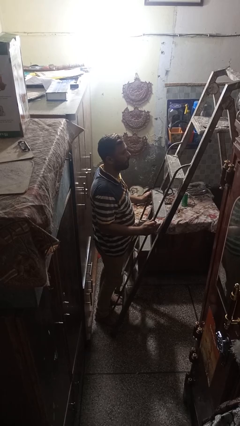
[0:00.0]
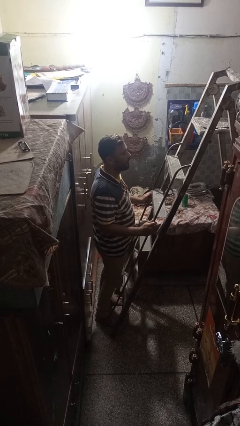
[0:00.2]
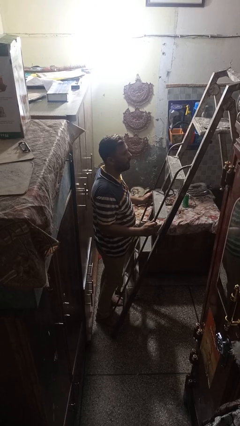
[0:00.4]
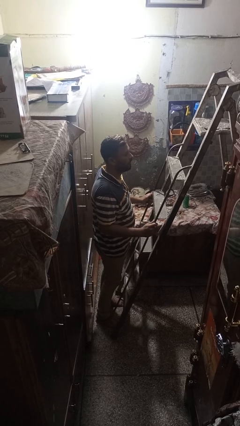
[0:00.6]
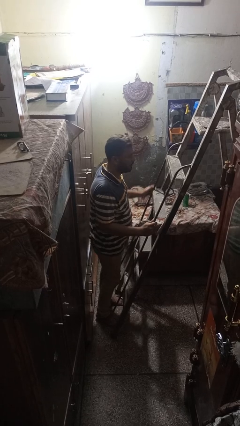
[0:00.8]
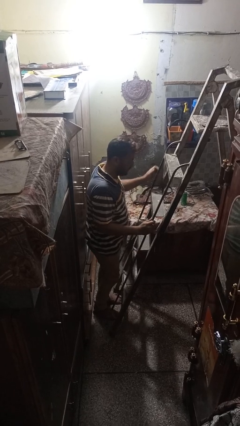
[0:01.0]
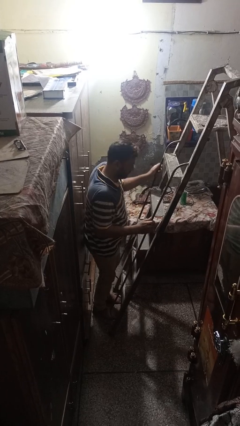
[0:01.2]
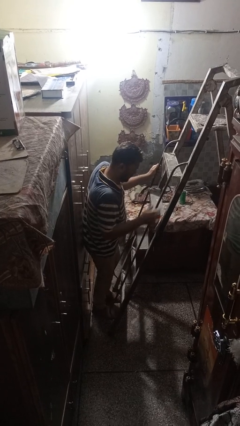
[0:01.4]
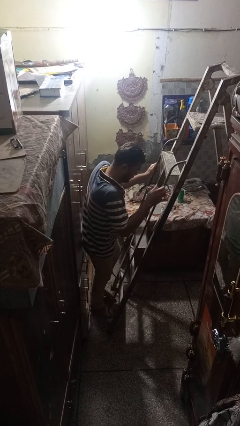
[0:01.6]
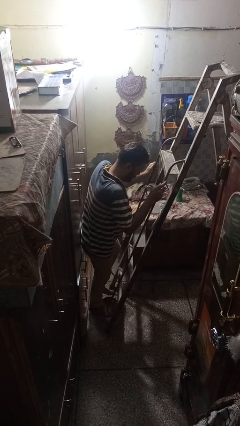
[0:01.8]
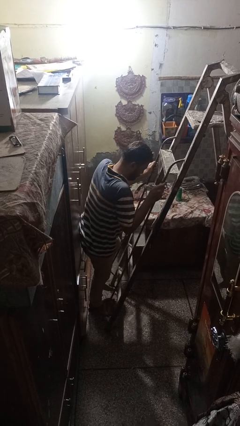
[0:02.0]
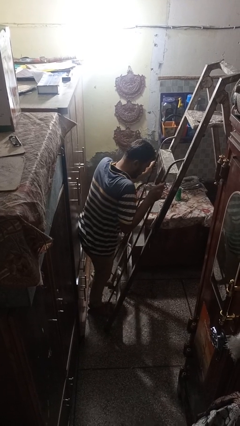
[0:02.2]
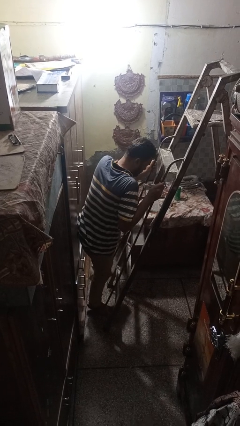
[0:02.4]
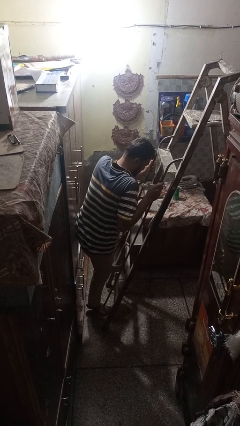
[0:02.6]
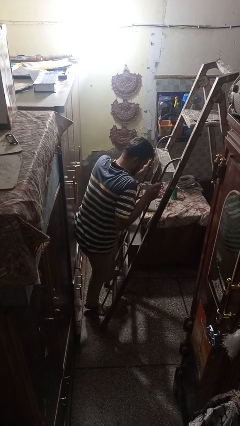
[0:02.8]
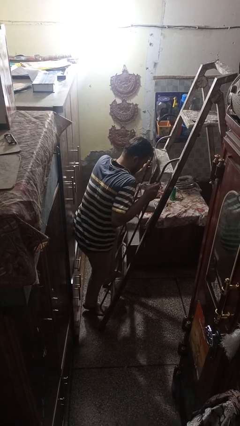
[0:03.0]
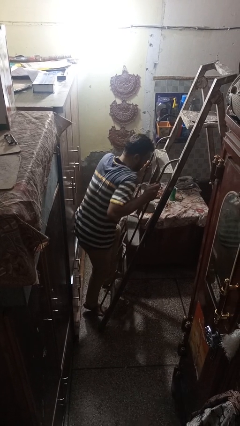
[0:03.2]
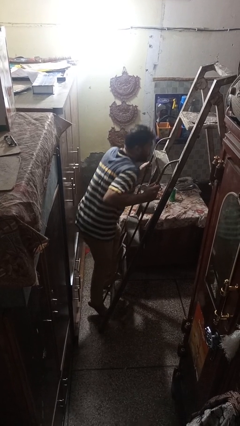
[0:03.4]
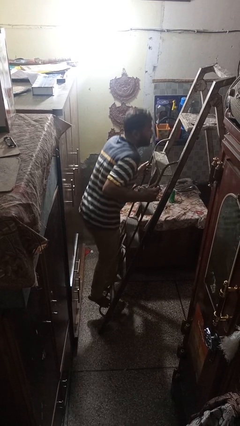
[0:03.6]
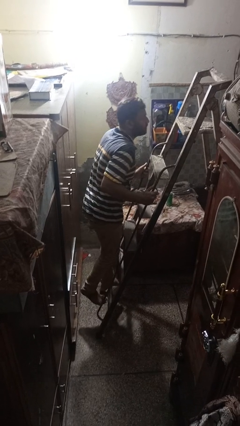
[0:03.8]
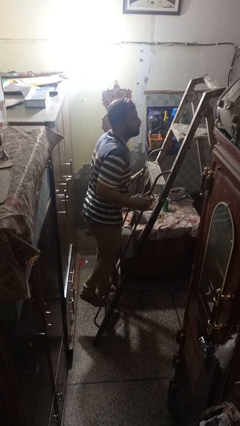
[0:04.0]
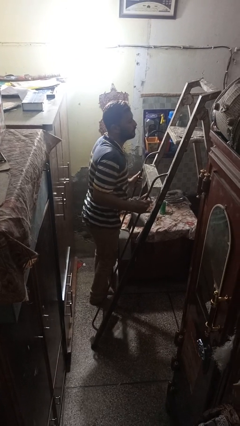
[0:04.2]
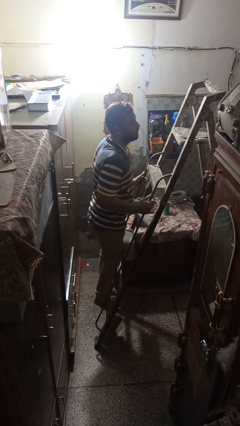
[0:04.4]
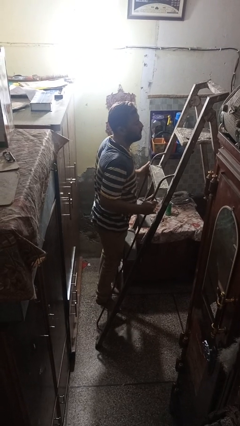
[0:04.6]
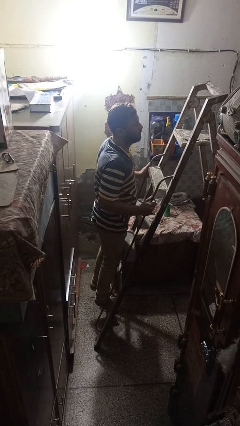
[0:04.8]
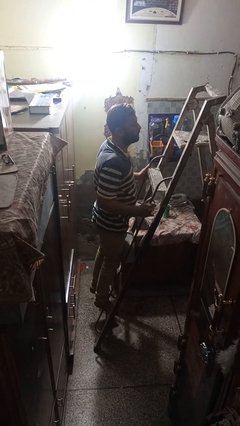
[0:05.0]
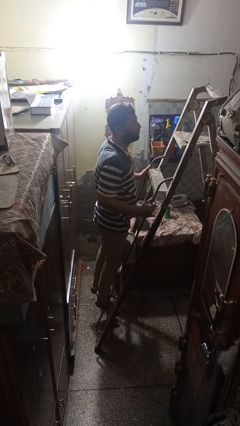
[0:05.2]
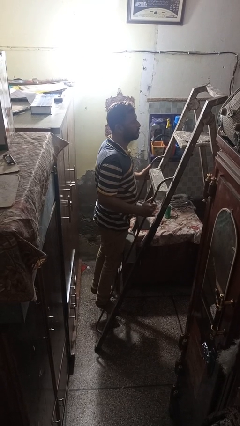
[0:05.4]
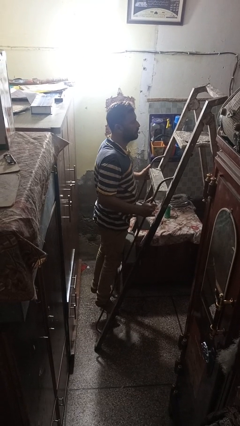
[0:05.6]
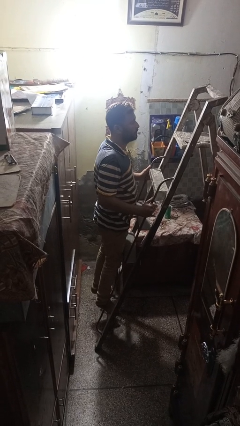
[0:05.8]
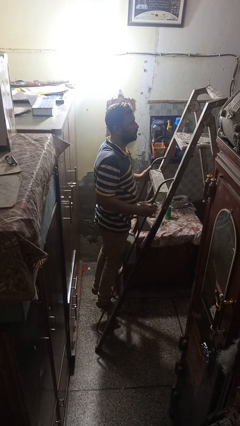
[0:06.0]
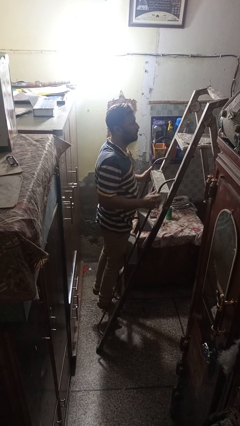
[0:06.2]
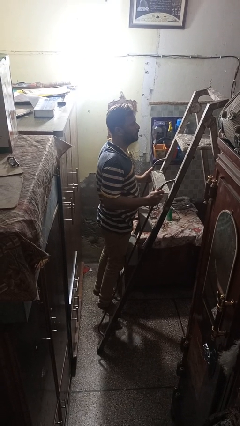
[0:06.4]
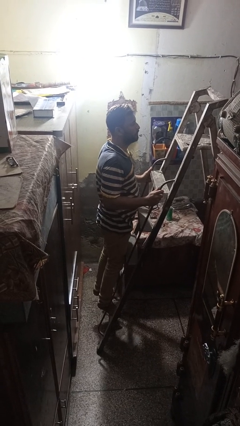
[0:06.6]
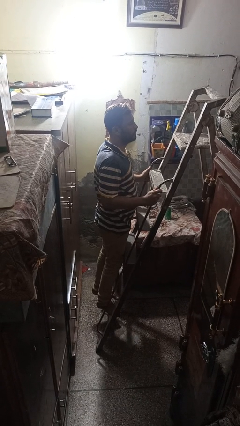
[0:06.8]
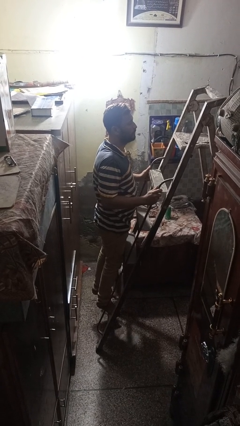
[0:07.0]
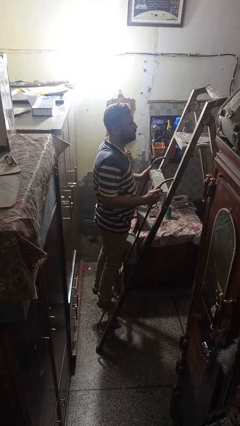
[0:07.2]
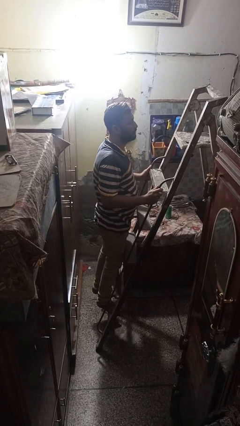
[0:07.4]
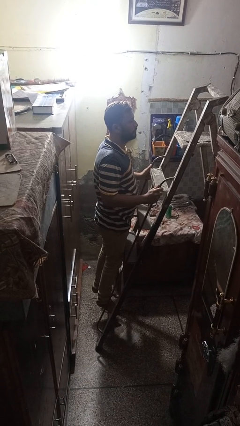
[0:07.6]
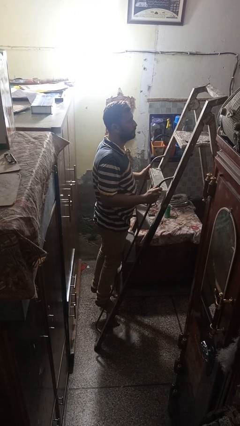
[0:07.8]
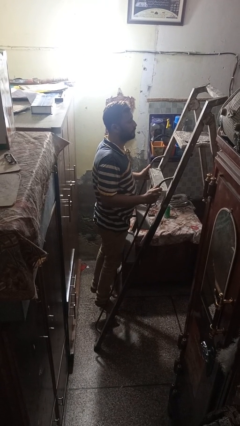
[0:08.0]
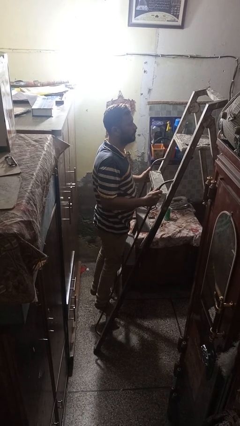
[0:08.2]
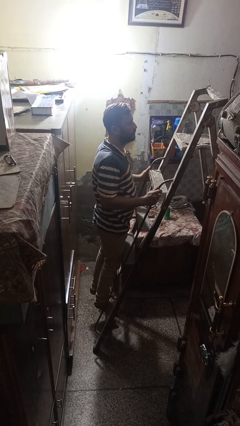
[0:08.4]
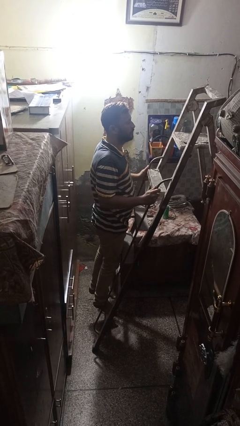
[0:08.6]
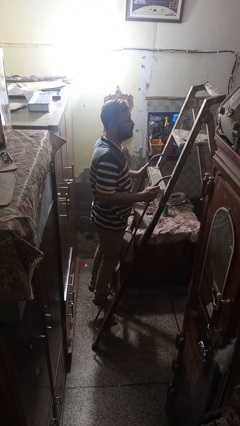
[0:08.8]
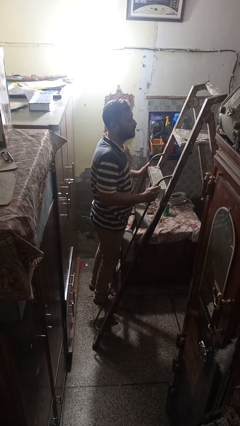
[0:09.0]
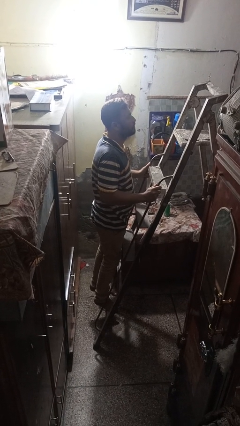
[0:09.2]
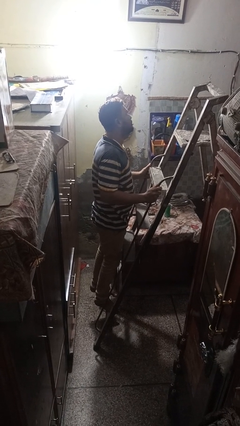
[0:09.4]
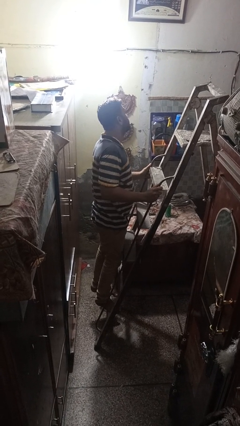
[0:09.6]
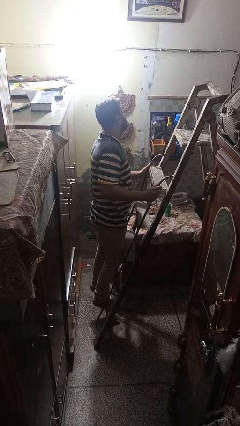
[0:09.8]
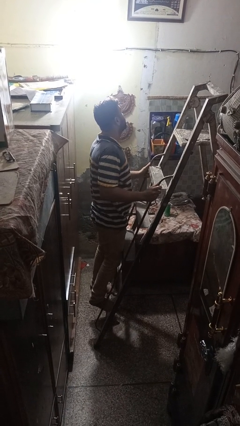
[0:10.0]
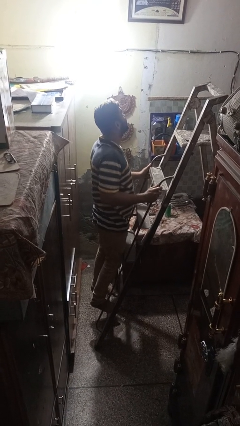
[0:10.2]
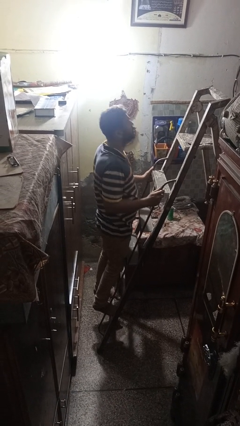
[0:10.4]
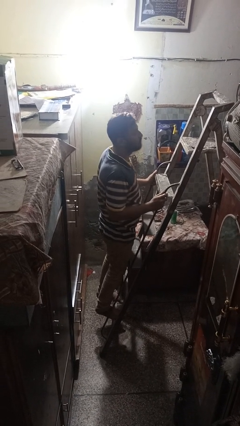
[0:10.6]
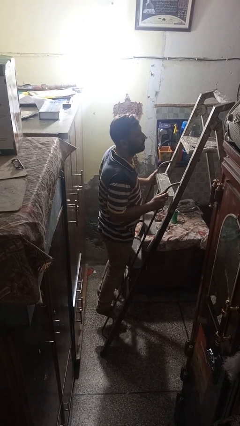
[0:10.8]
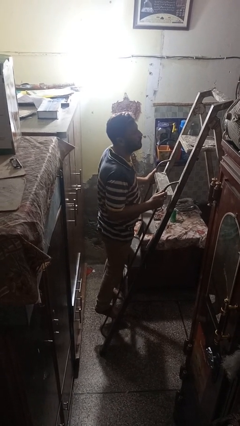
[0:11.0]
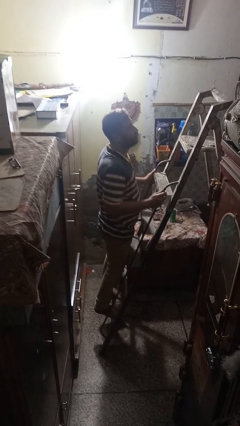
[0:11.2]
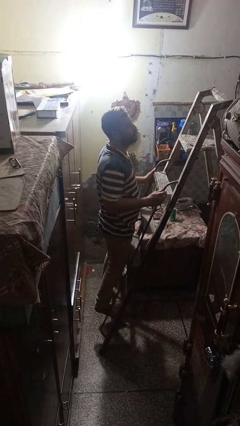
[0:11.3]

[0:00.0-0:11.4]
person climbs up ladder

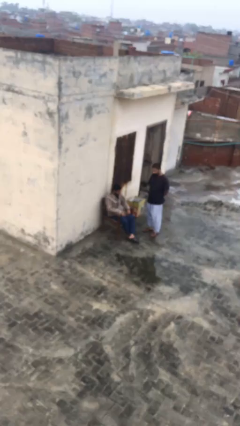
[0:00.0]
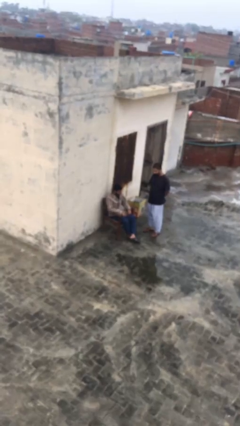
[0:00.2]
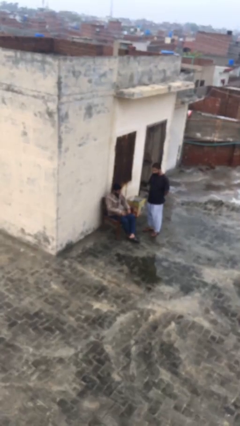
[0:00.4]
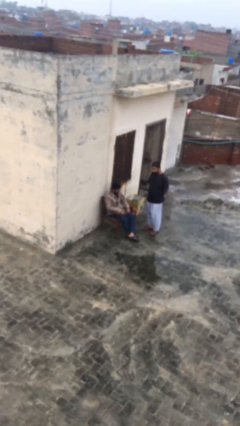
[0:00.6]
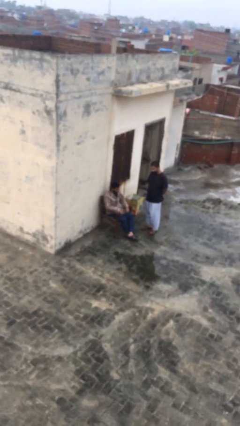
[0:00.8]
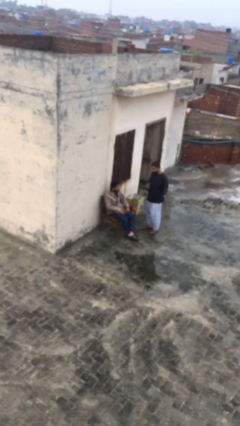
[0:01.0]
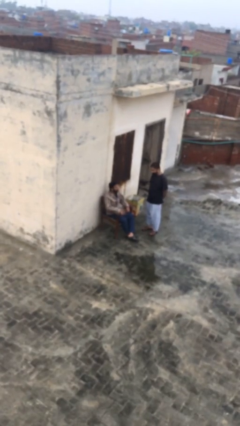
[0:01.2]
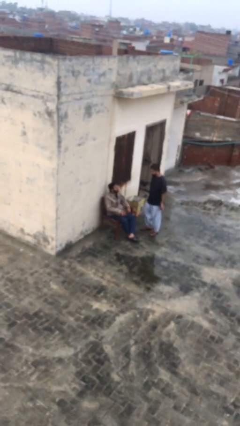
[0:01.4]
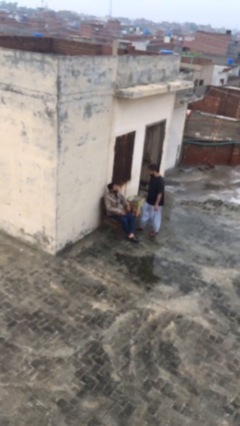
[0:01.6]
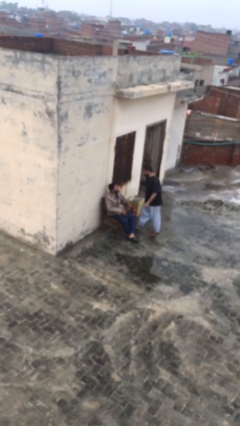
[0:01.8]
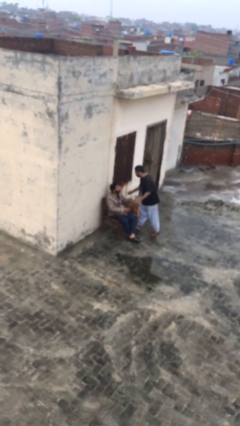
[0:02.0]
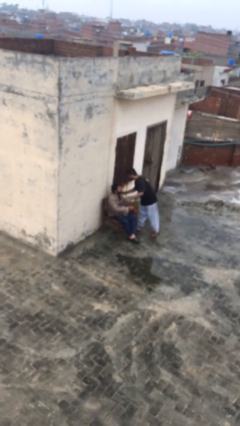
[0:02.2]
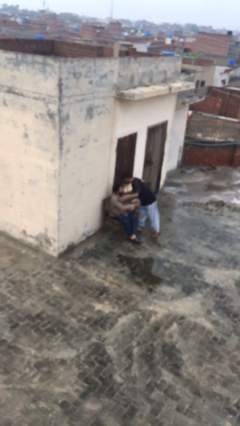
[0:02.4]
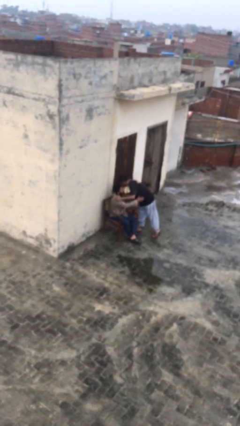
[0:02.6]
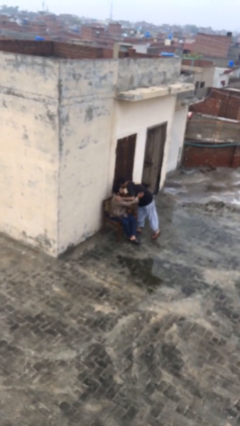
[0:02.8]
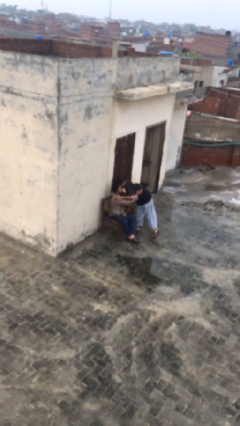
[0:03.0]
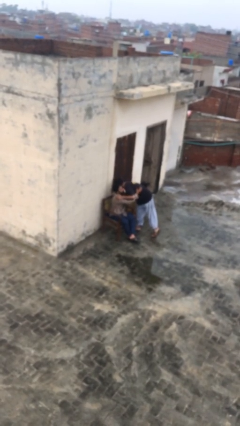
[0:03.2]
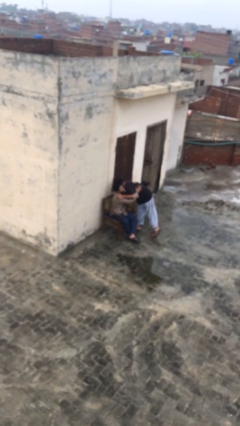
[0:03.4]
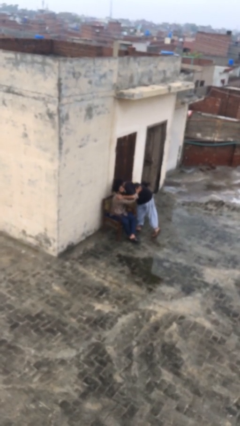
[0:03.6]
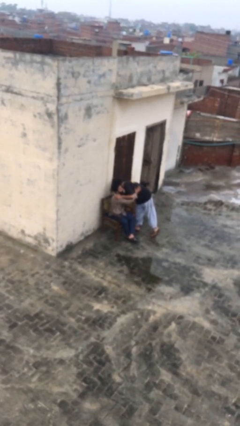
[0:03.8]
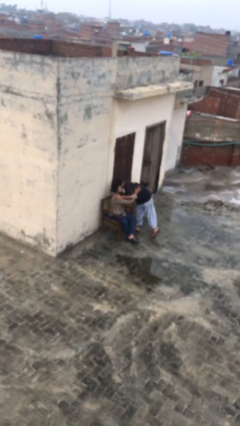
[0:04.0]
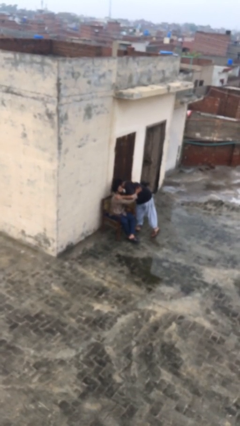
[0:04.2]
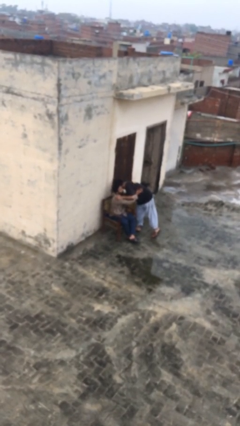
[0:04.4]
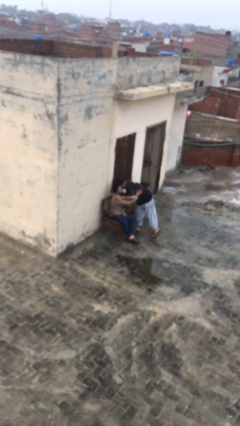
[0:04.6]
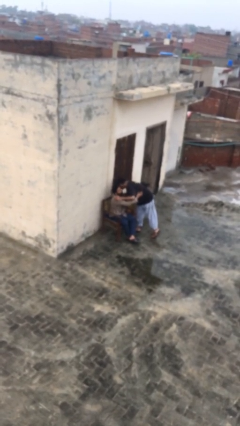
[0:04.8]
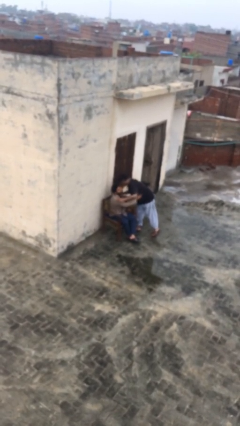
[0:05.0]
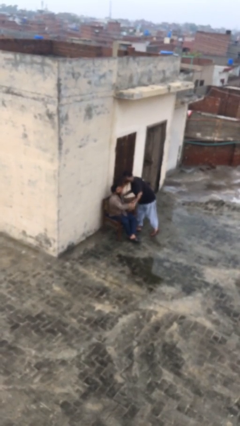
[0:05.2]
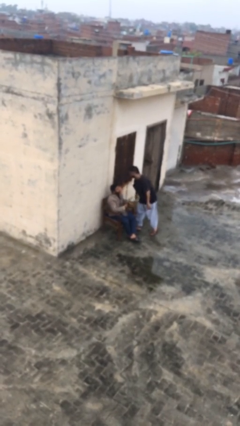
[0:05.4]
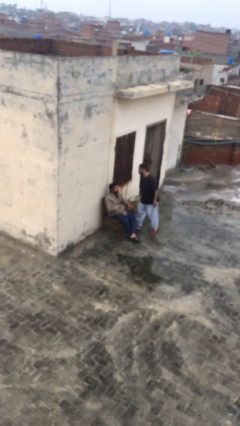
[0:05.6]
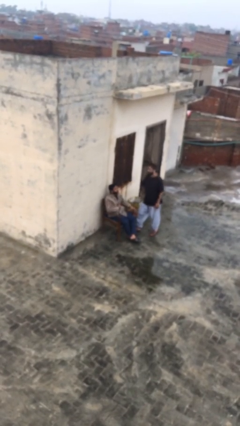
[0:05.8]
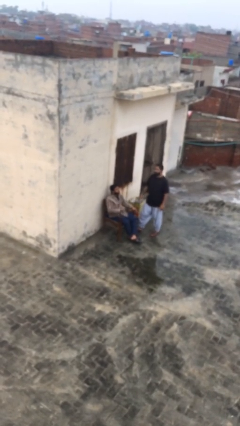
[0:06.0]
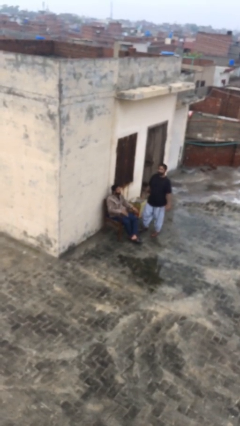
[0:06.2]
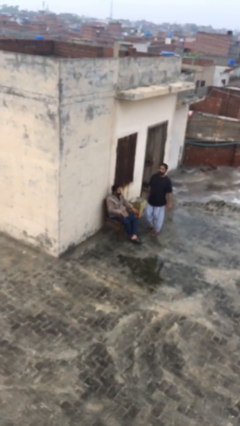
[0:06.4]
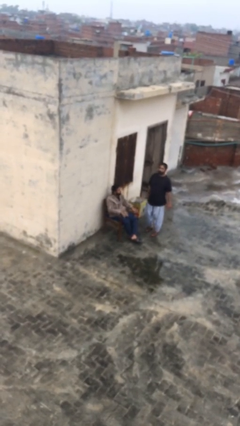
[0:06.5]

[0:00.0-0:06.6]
person embraces person

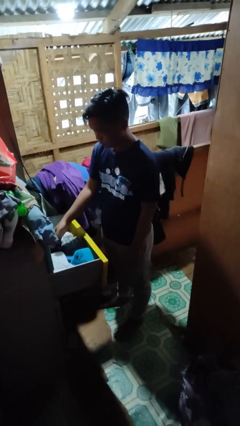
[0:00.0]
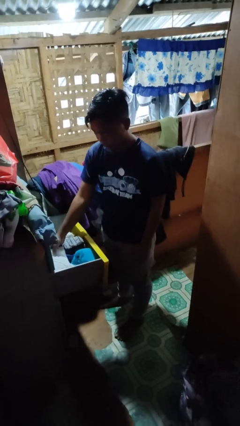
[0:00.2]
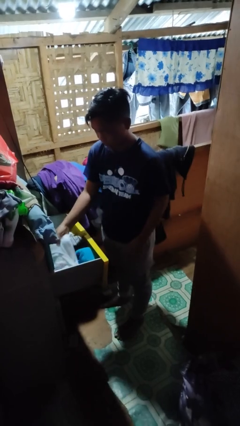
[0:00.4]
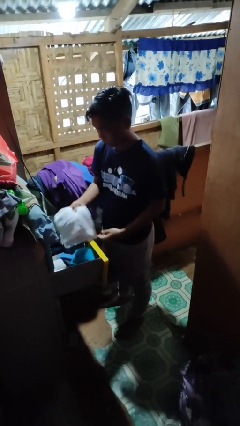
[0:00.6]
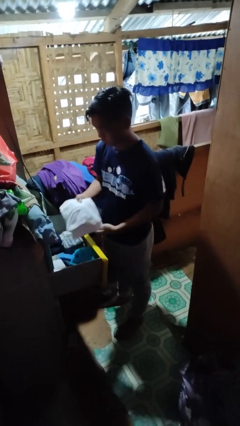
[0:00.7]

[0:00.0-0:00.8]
person takes clothes from dresser
